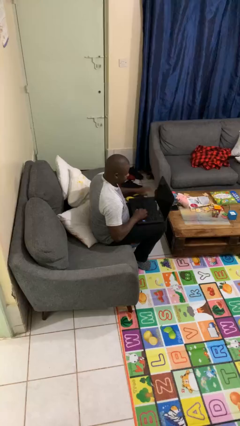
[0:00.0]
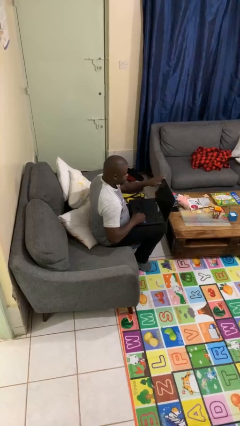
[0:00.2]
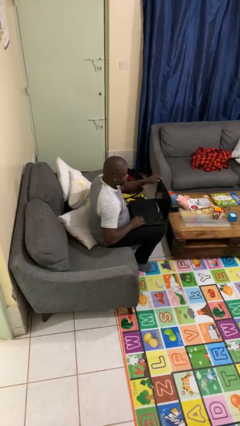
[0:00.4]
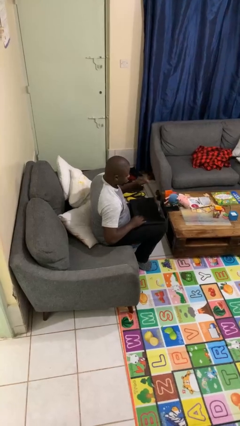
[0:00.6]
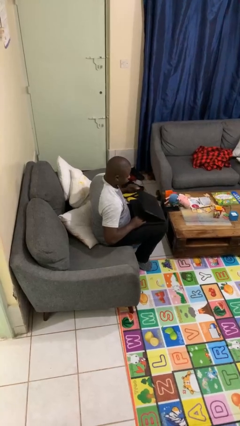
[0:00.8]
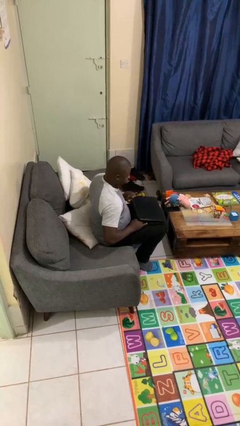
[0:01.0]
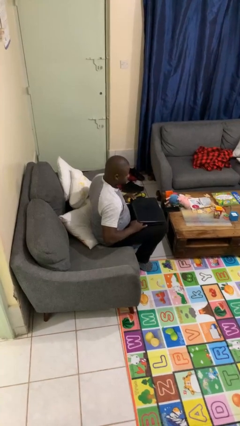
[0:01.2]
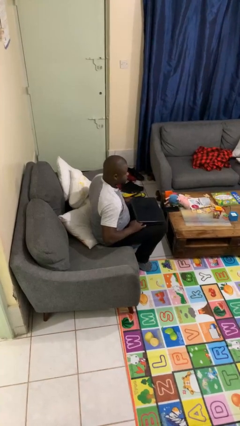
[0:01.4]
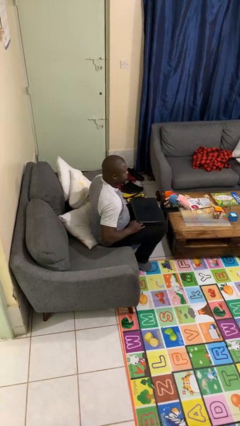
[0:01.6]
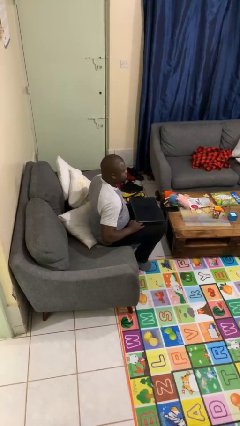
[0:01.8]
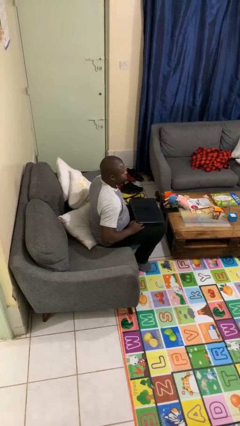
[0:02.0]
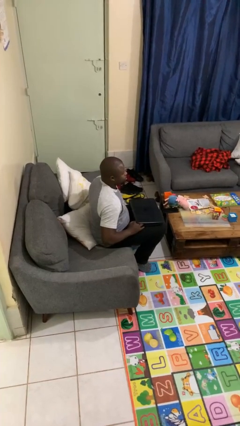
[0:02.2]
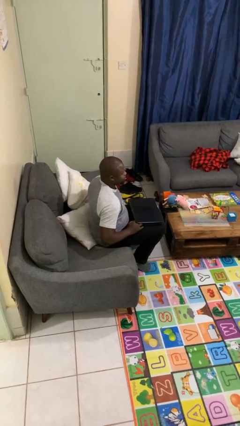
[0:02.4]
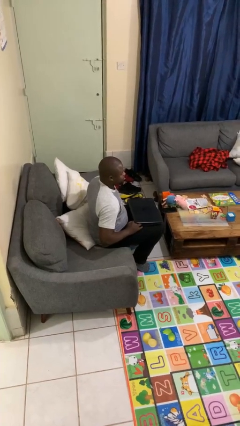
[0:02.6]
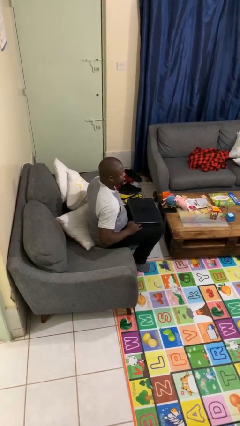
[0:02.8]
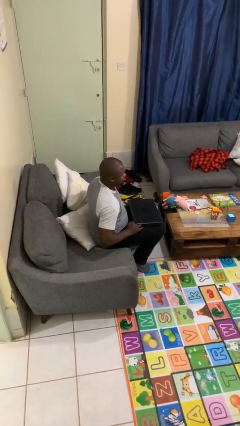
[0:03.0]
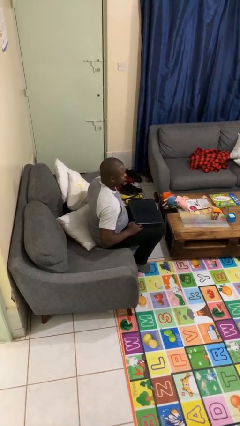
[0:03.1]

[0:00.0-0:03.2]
person closes laptop

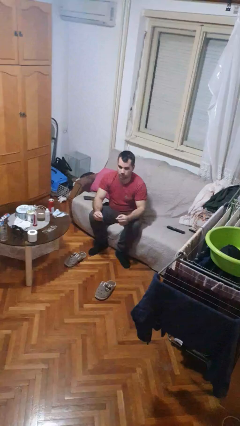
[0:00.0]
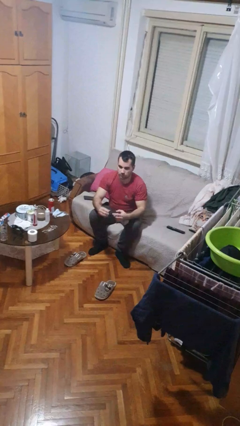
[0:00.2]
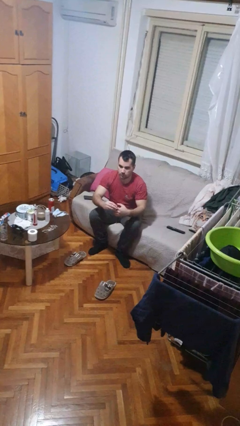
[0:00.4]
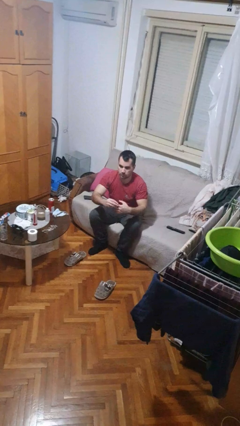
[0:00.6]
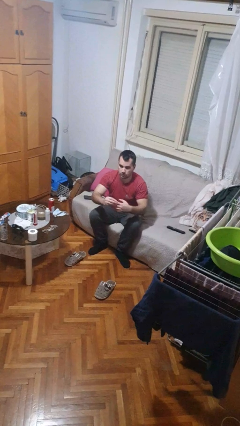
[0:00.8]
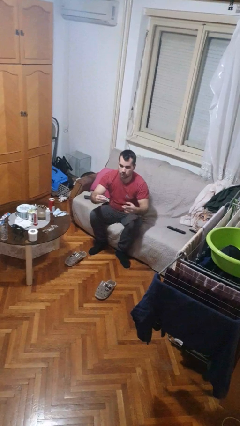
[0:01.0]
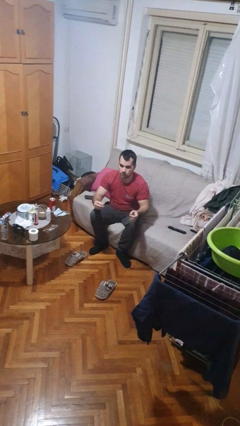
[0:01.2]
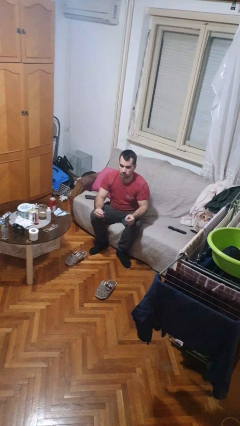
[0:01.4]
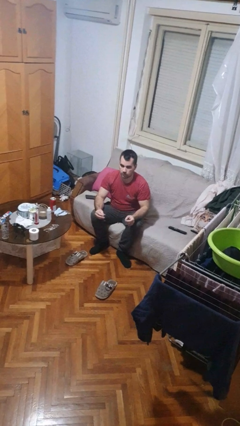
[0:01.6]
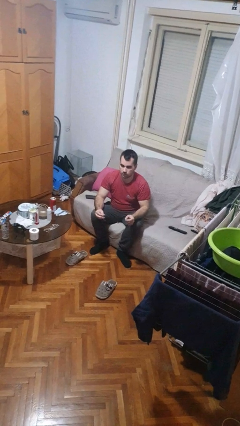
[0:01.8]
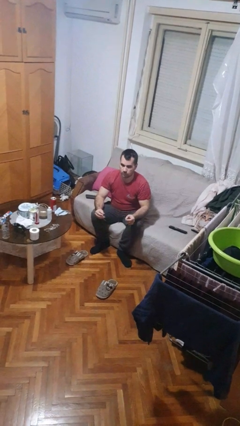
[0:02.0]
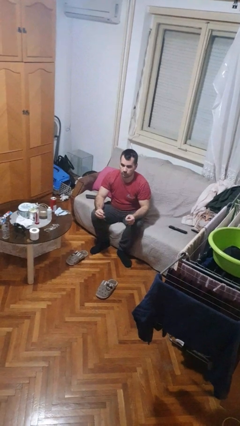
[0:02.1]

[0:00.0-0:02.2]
person takes off ring

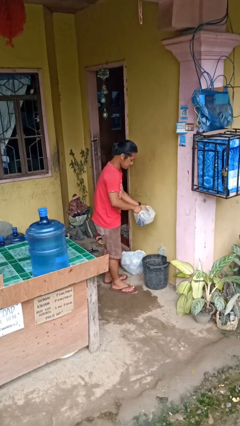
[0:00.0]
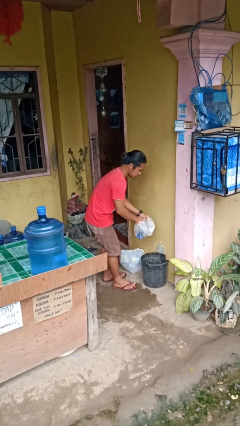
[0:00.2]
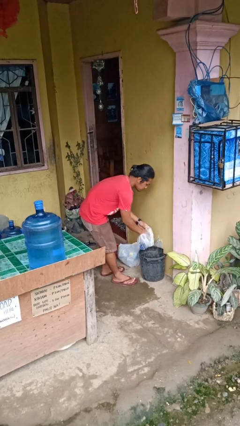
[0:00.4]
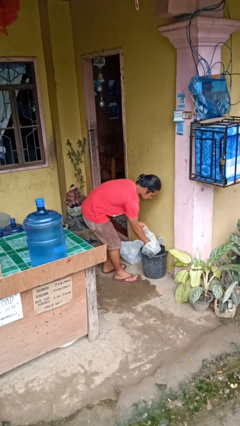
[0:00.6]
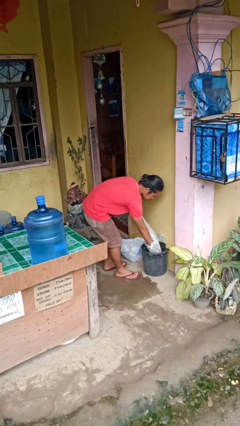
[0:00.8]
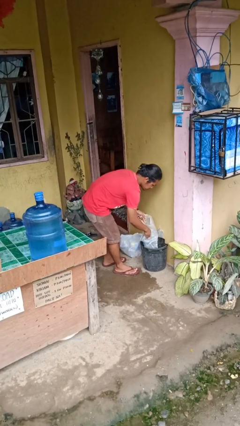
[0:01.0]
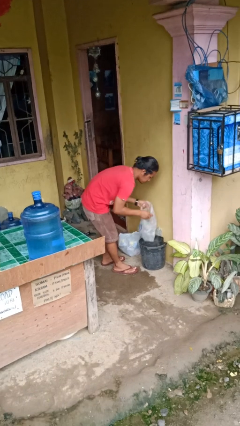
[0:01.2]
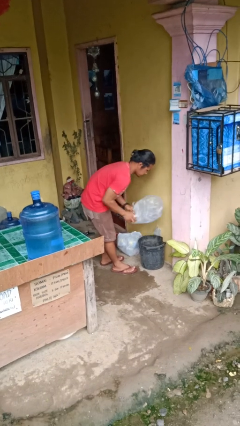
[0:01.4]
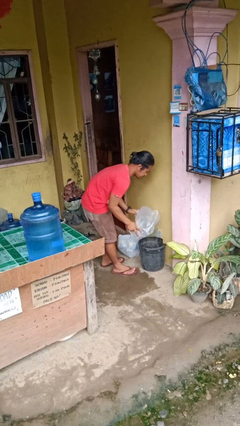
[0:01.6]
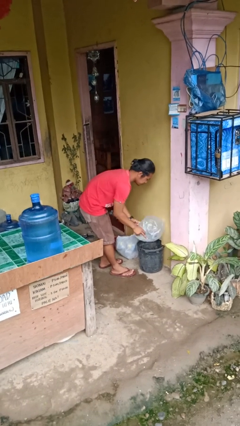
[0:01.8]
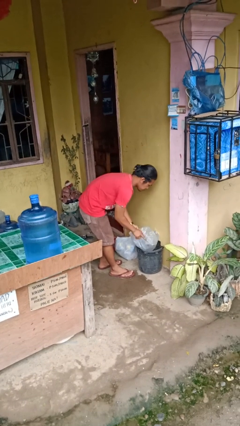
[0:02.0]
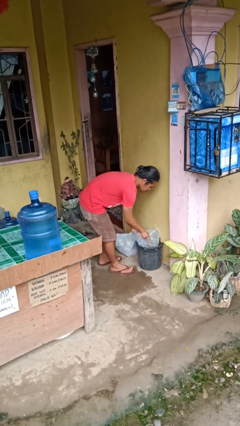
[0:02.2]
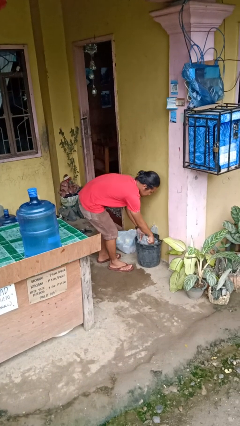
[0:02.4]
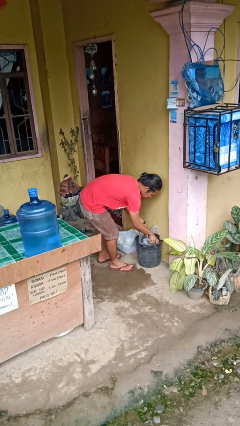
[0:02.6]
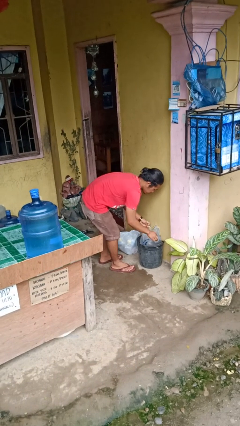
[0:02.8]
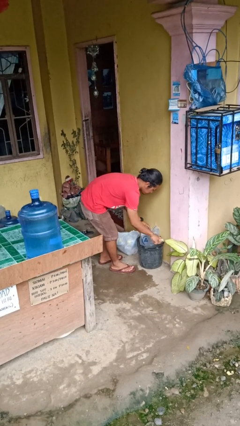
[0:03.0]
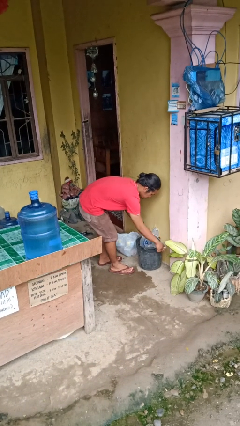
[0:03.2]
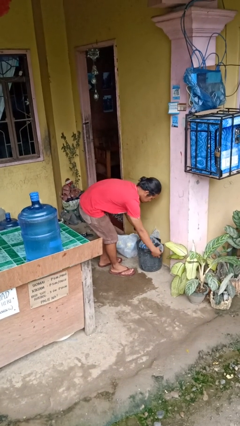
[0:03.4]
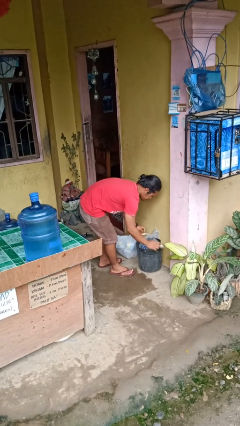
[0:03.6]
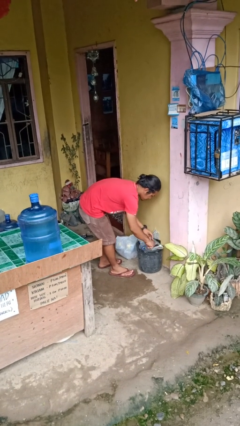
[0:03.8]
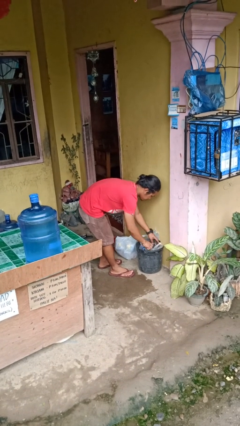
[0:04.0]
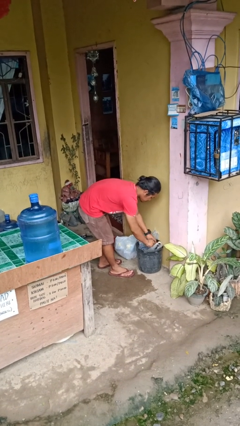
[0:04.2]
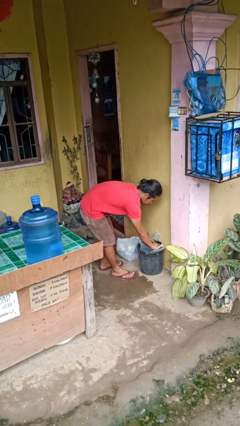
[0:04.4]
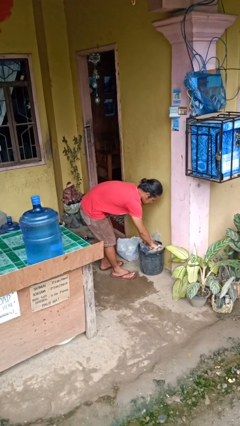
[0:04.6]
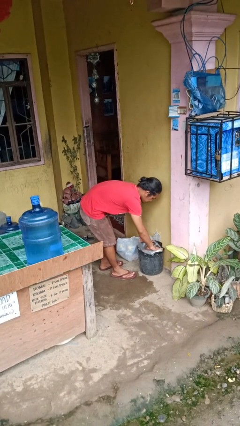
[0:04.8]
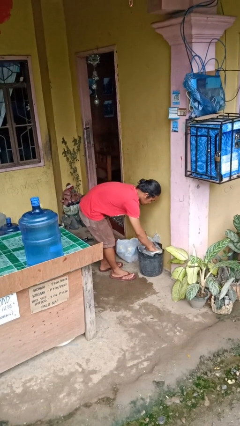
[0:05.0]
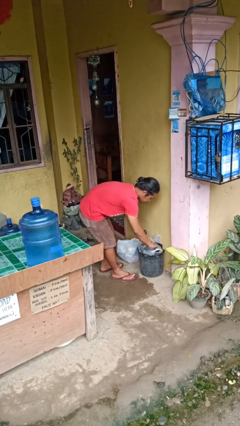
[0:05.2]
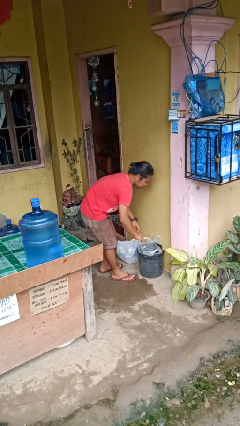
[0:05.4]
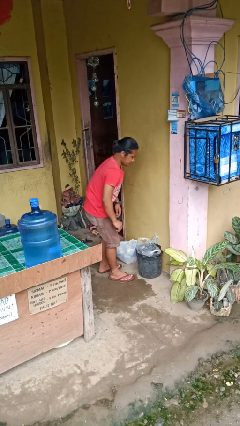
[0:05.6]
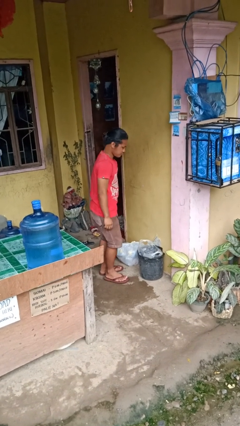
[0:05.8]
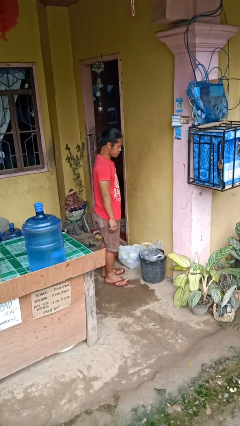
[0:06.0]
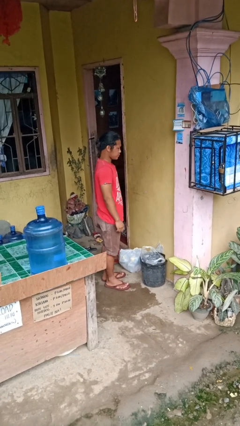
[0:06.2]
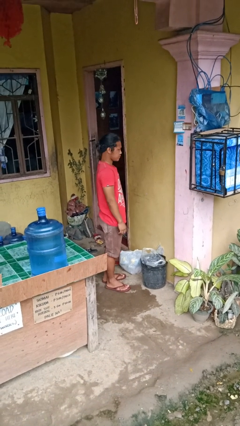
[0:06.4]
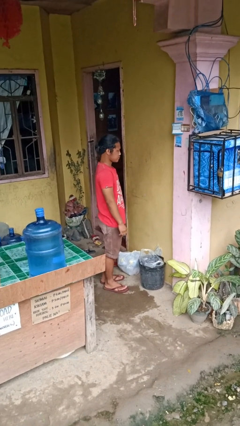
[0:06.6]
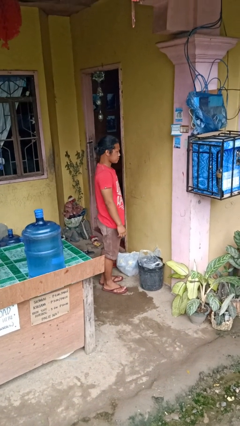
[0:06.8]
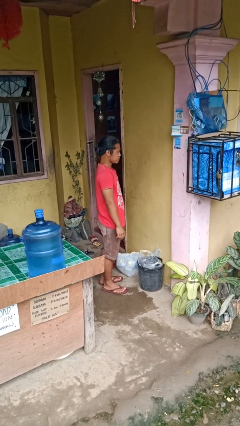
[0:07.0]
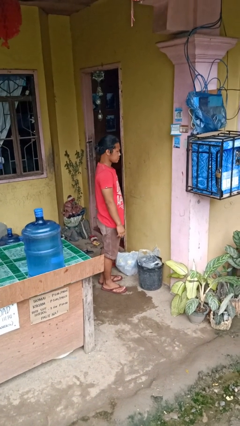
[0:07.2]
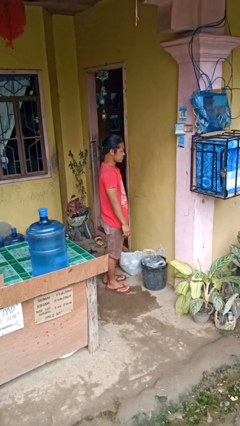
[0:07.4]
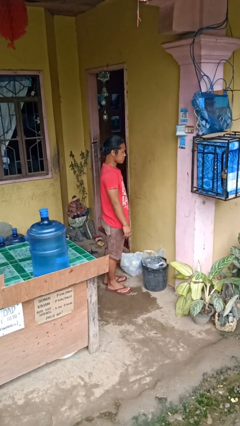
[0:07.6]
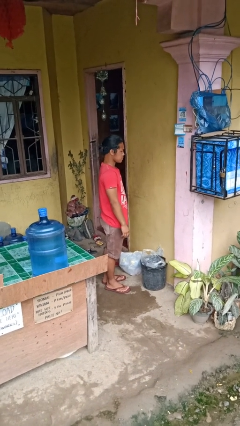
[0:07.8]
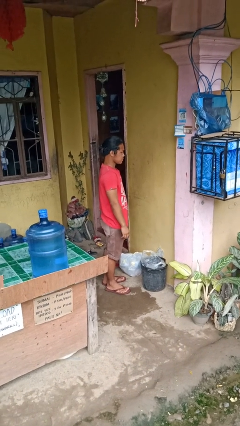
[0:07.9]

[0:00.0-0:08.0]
person inserts trashbag into trashcan

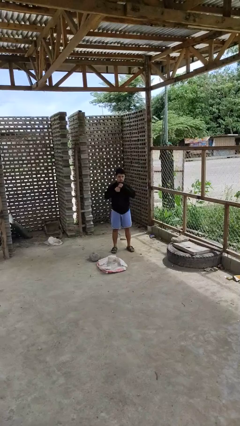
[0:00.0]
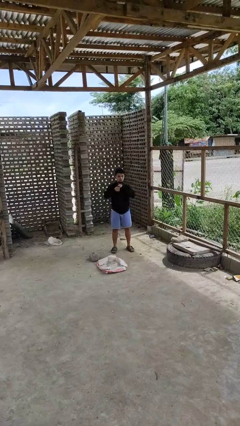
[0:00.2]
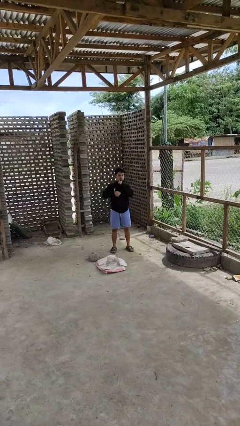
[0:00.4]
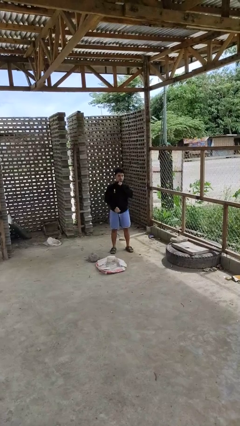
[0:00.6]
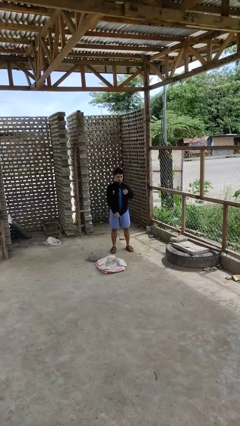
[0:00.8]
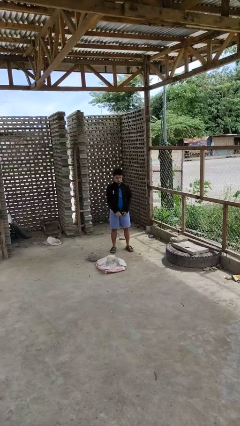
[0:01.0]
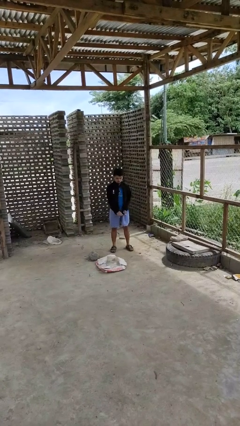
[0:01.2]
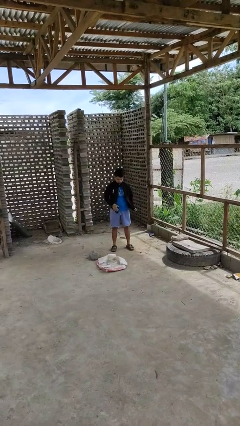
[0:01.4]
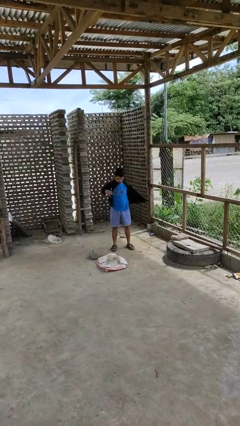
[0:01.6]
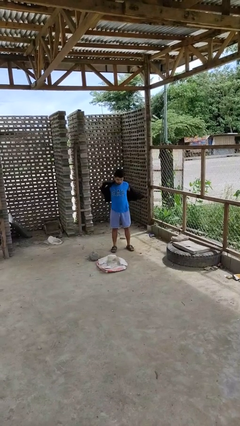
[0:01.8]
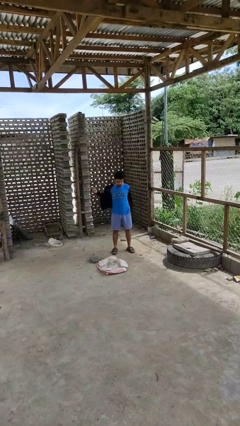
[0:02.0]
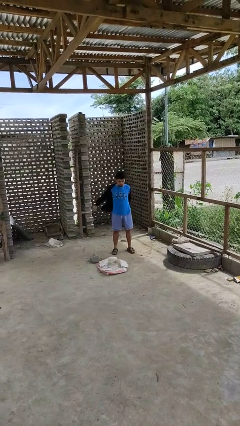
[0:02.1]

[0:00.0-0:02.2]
person unzips jacket

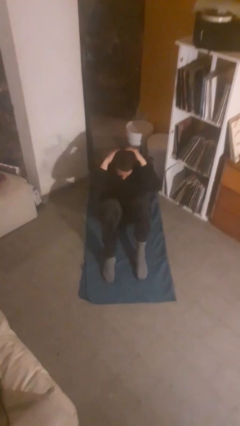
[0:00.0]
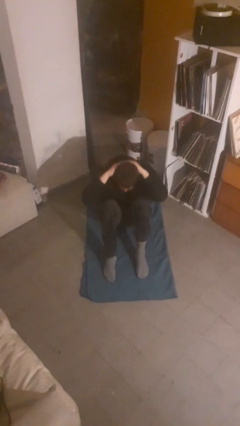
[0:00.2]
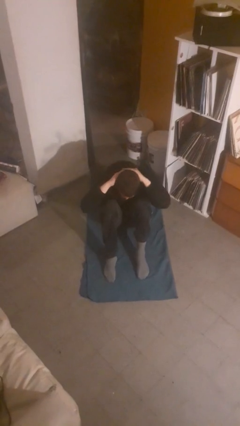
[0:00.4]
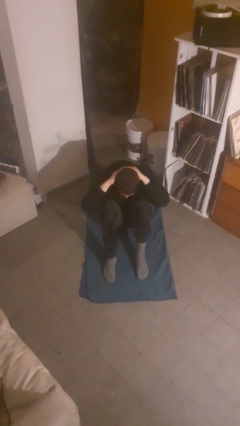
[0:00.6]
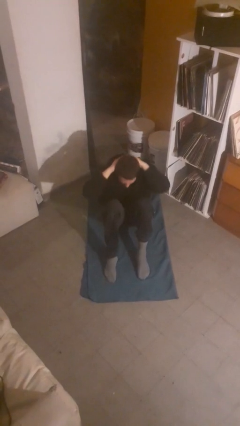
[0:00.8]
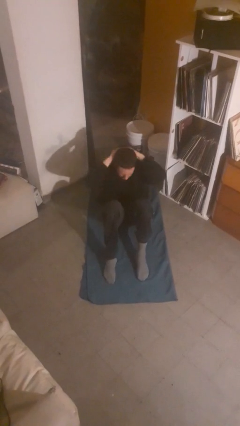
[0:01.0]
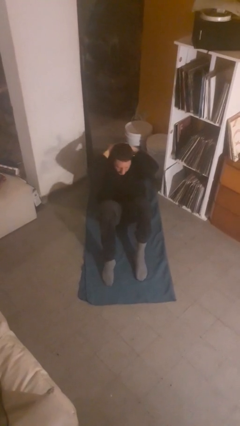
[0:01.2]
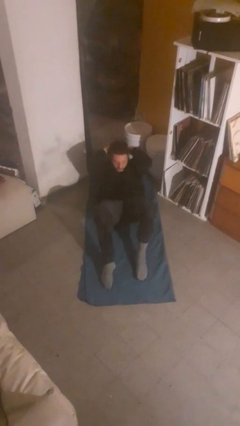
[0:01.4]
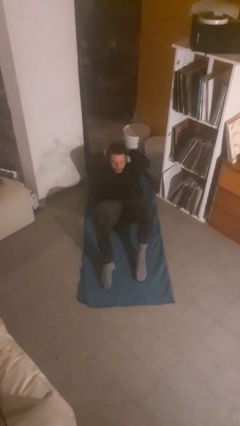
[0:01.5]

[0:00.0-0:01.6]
person exercises with situp
